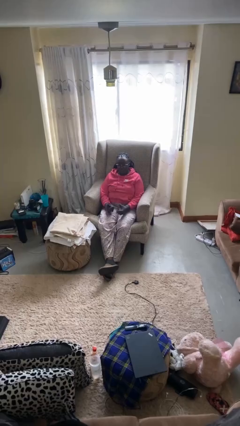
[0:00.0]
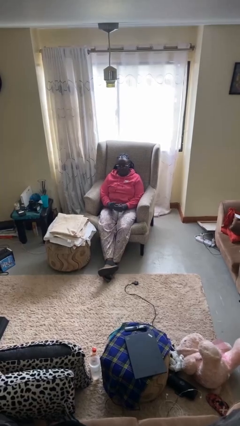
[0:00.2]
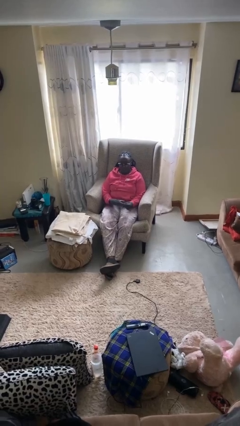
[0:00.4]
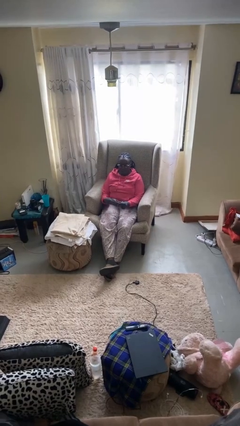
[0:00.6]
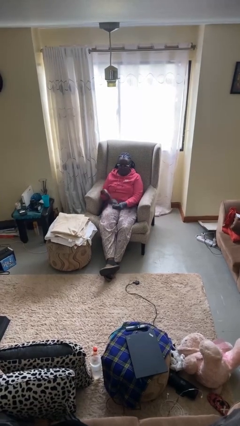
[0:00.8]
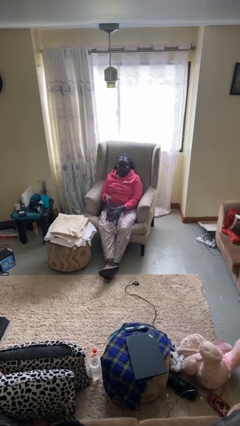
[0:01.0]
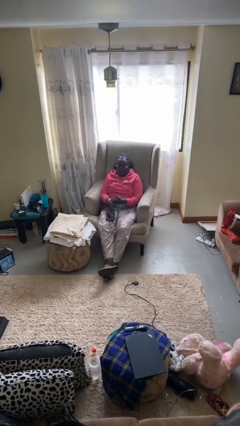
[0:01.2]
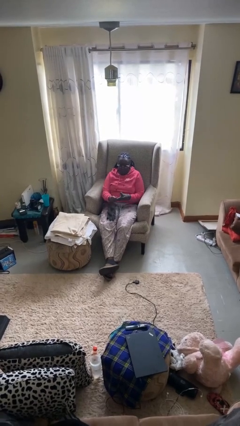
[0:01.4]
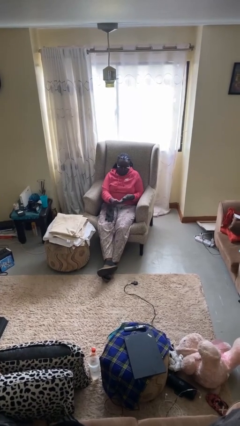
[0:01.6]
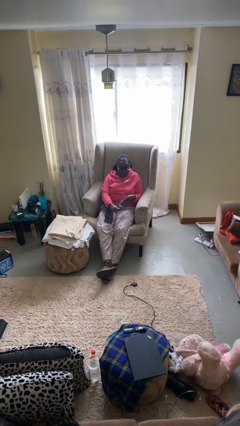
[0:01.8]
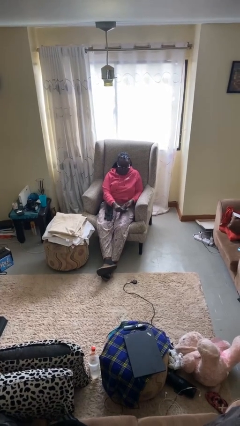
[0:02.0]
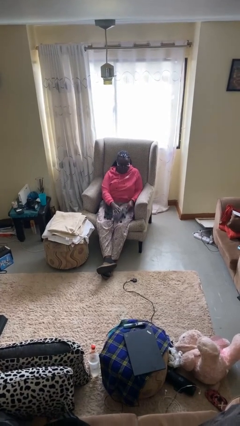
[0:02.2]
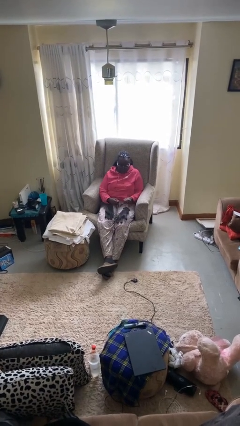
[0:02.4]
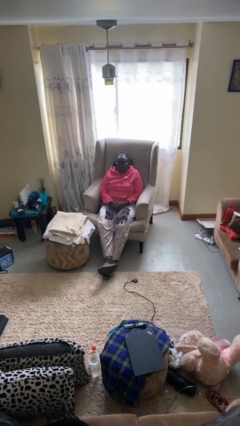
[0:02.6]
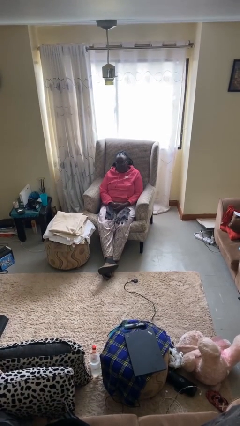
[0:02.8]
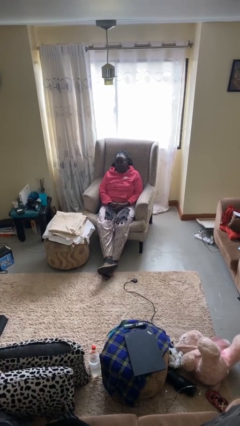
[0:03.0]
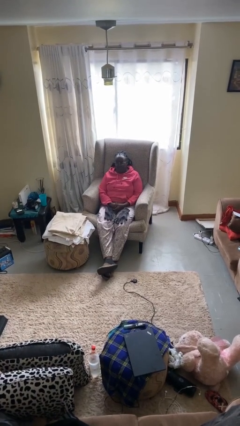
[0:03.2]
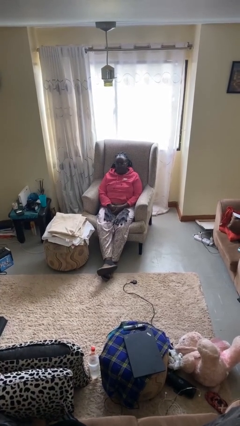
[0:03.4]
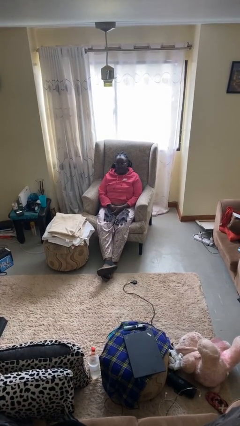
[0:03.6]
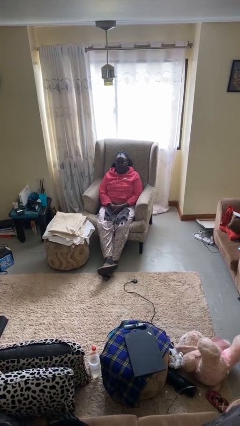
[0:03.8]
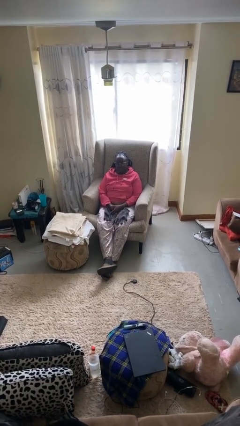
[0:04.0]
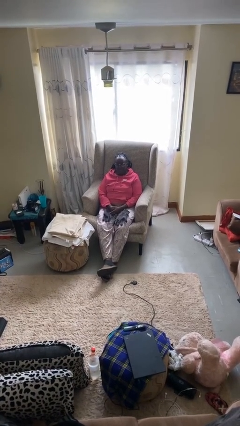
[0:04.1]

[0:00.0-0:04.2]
person takes off gloves

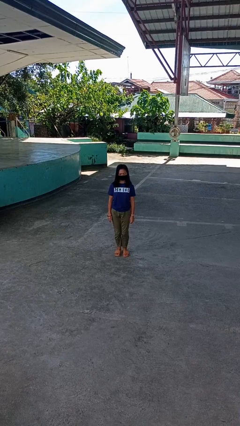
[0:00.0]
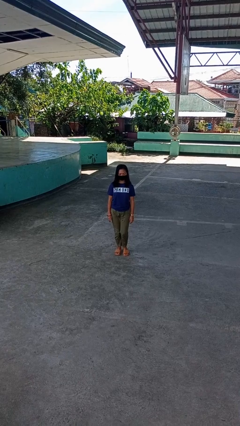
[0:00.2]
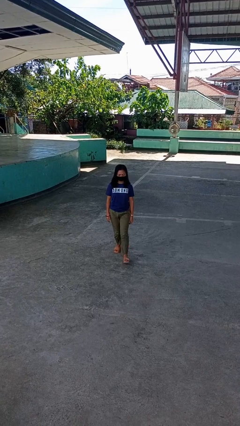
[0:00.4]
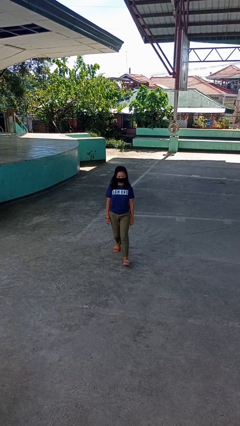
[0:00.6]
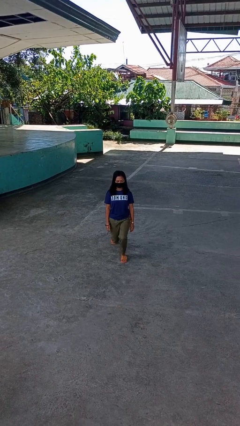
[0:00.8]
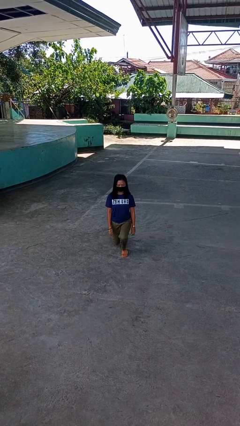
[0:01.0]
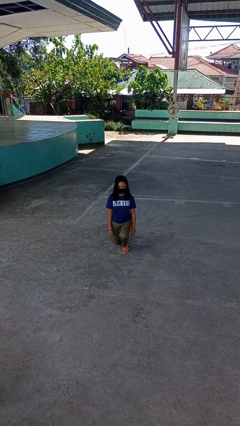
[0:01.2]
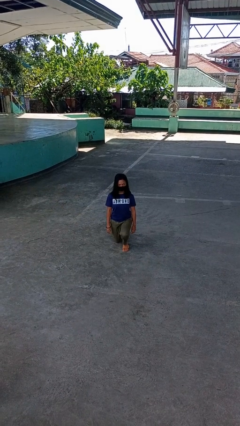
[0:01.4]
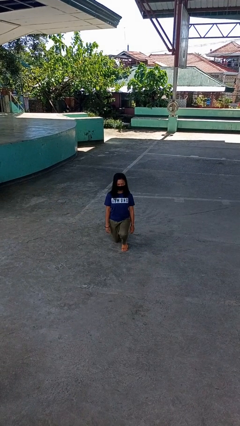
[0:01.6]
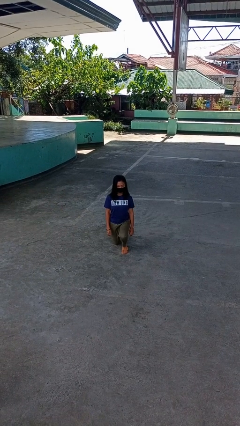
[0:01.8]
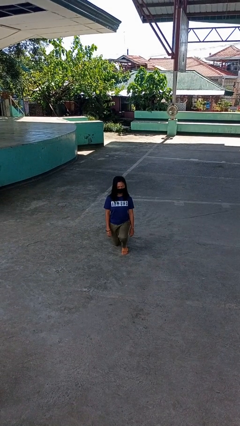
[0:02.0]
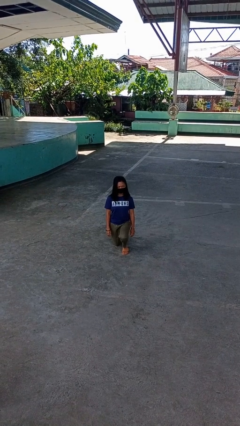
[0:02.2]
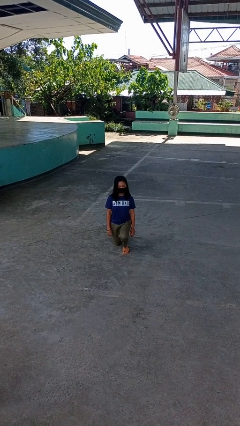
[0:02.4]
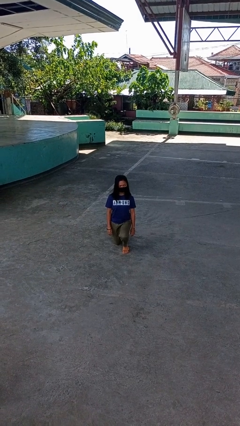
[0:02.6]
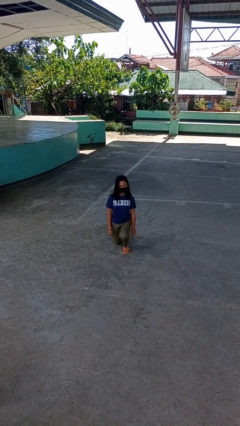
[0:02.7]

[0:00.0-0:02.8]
person kneels

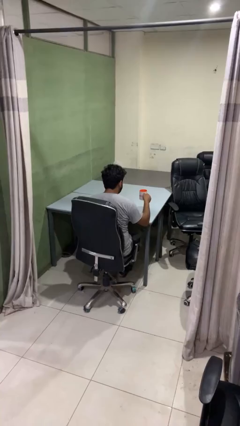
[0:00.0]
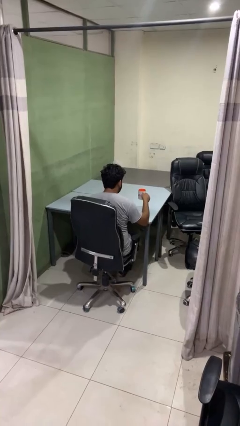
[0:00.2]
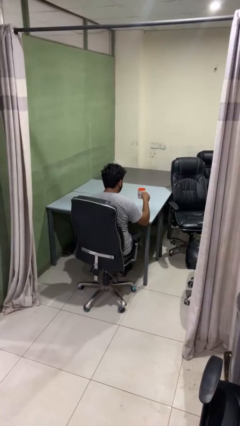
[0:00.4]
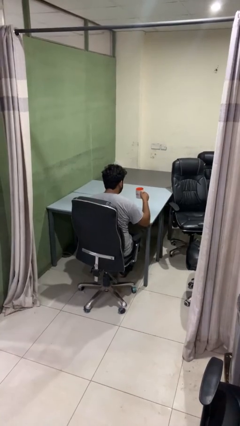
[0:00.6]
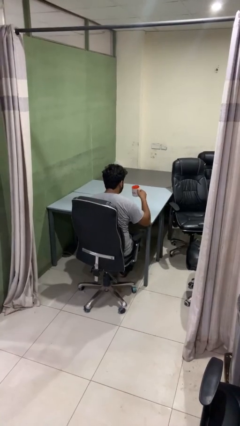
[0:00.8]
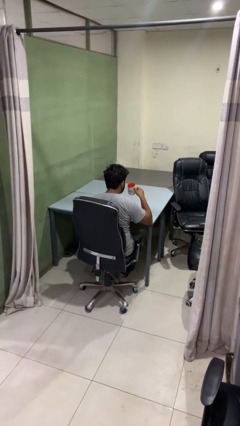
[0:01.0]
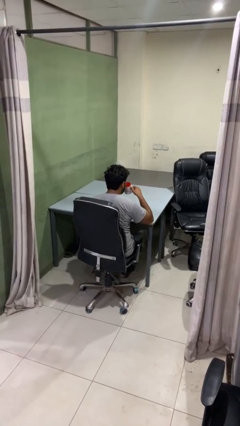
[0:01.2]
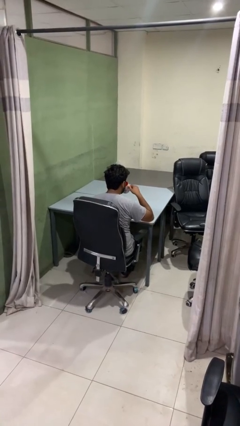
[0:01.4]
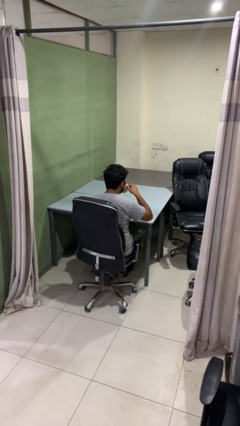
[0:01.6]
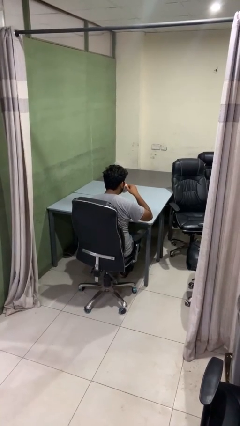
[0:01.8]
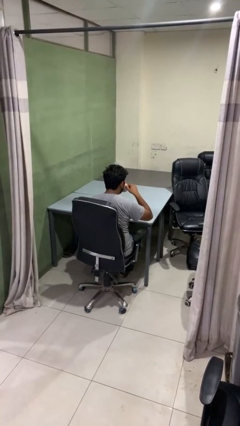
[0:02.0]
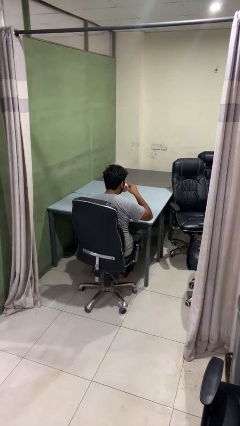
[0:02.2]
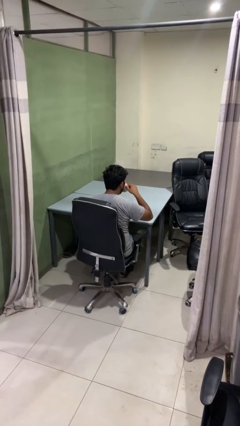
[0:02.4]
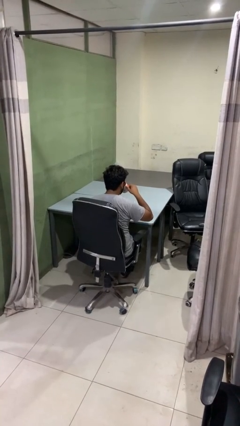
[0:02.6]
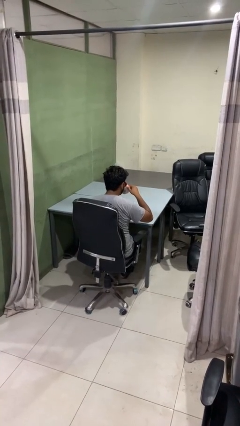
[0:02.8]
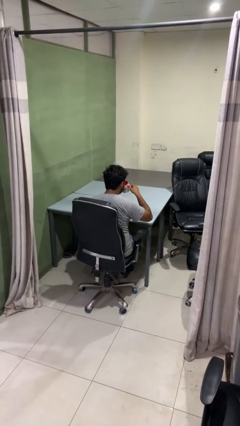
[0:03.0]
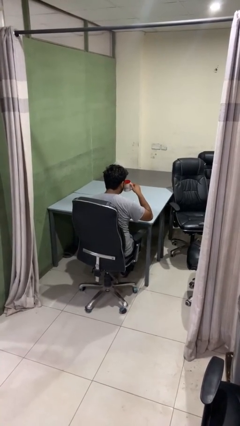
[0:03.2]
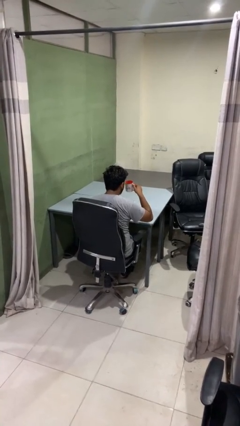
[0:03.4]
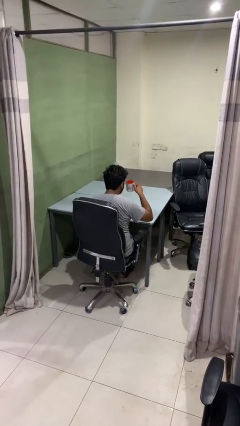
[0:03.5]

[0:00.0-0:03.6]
person drinks from mug

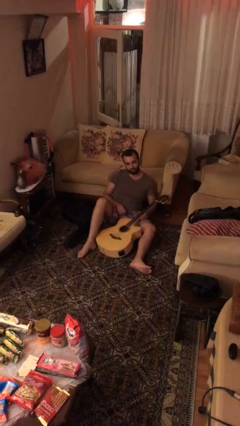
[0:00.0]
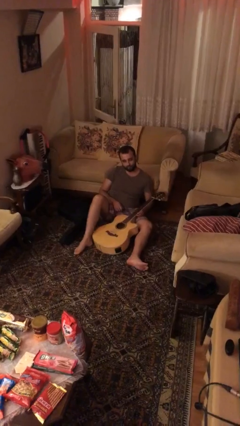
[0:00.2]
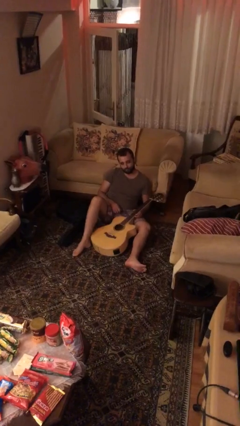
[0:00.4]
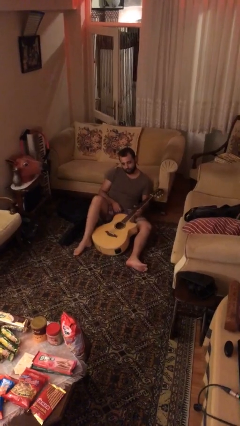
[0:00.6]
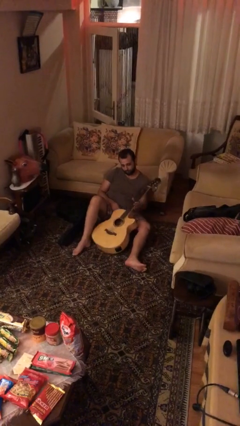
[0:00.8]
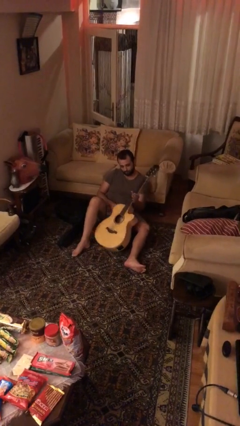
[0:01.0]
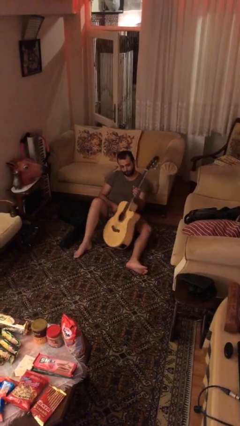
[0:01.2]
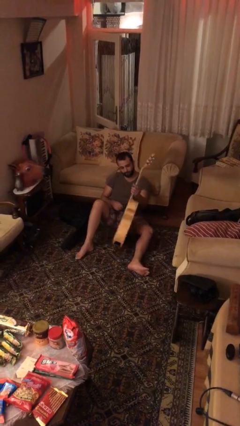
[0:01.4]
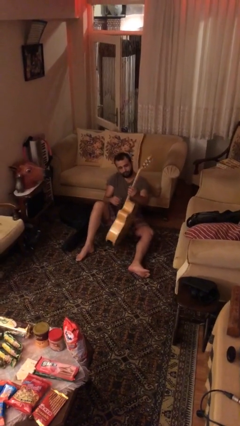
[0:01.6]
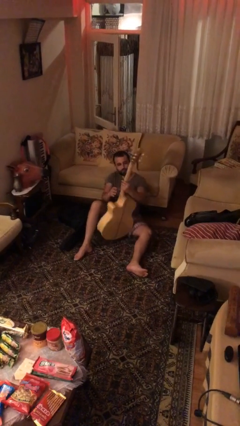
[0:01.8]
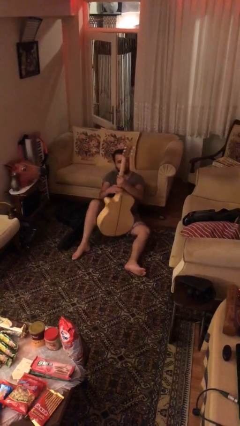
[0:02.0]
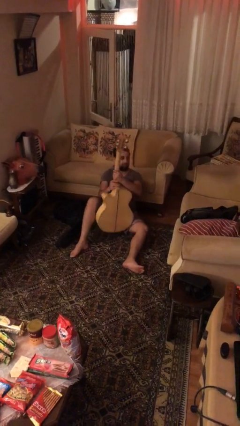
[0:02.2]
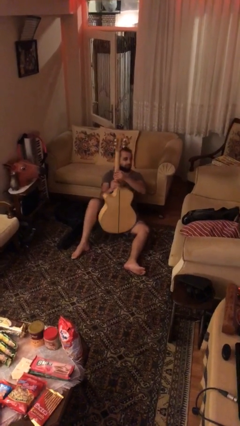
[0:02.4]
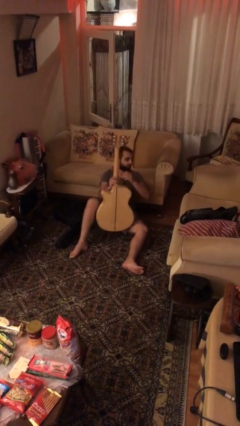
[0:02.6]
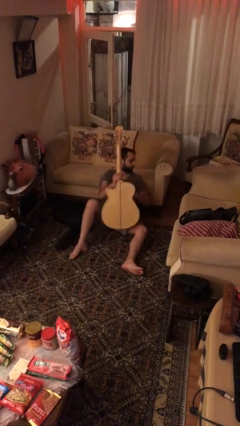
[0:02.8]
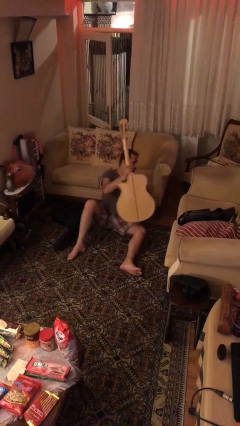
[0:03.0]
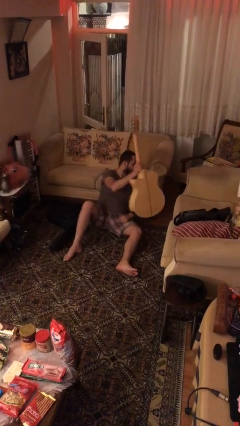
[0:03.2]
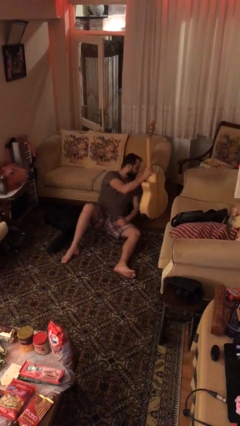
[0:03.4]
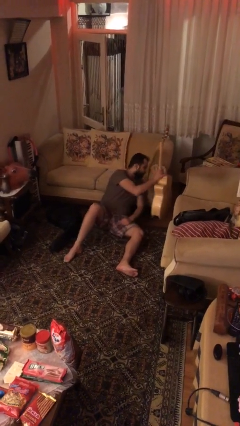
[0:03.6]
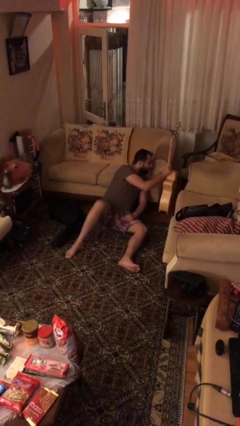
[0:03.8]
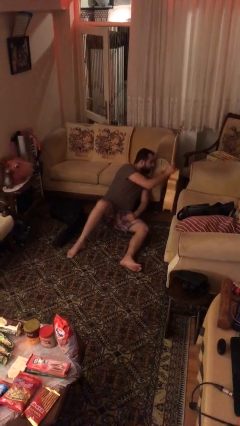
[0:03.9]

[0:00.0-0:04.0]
person picks up object from floor

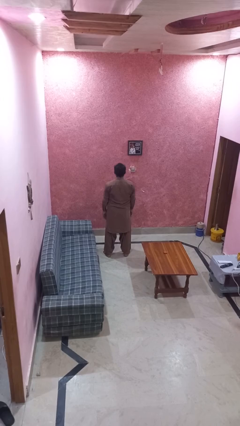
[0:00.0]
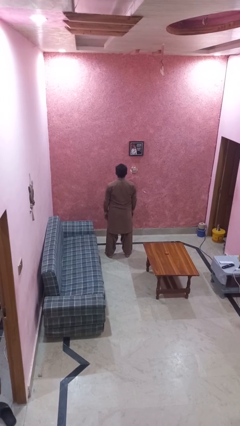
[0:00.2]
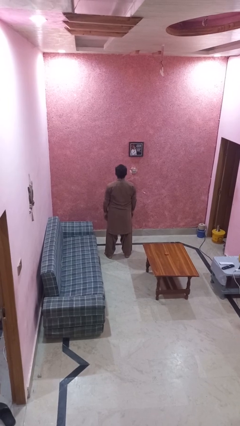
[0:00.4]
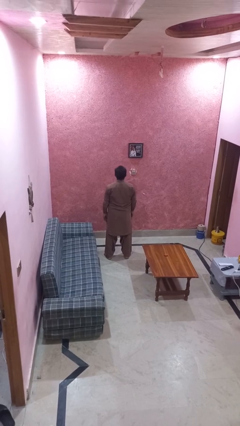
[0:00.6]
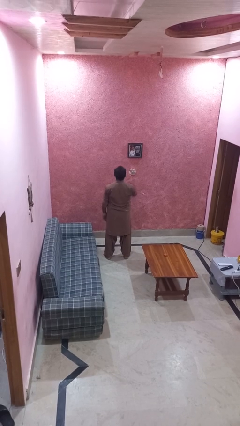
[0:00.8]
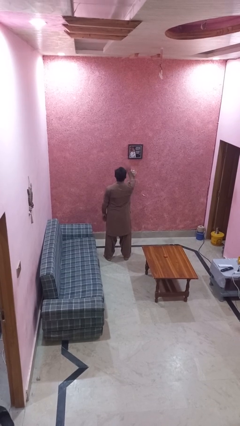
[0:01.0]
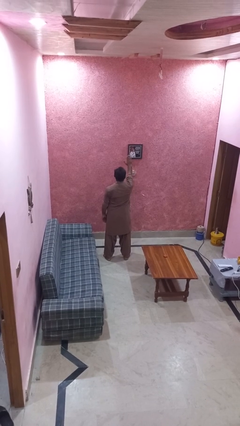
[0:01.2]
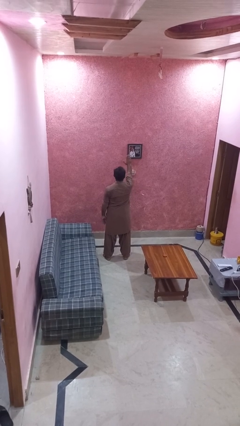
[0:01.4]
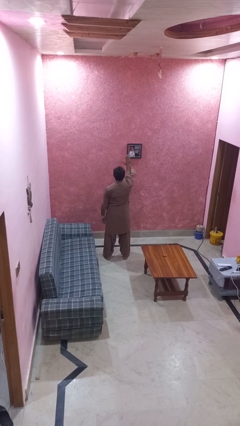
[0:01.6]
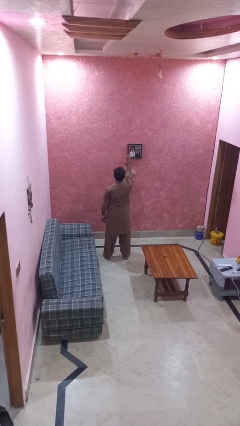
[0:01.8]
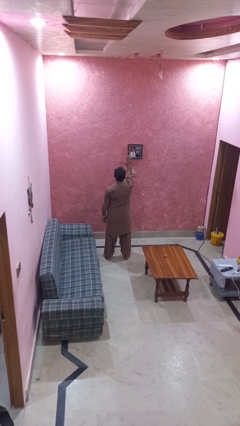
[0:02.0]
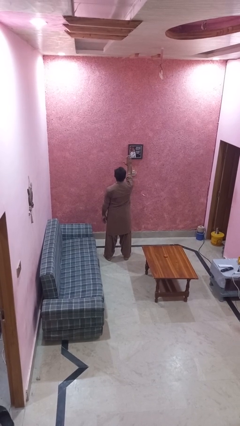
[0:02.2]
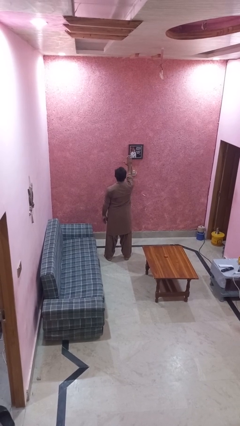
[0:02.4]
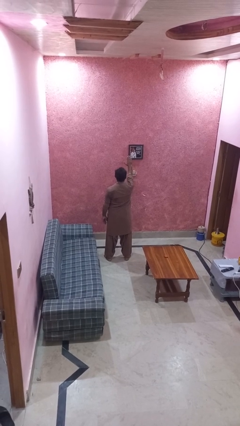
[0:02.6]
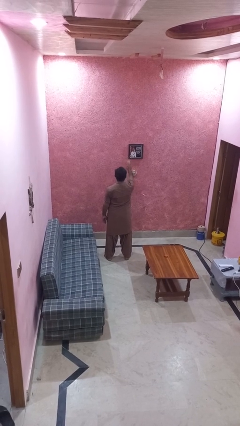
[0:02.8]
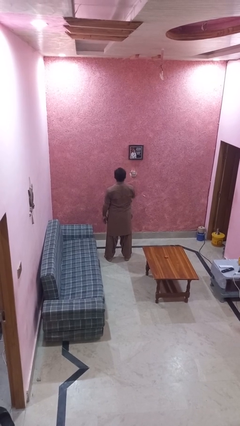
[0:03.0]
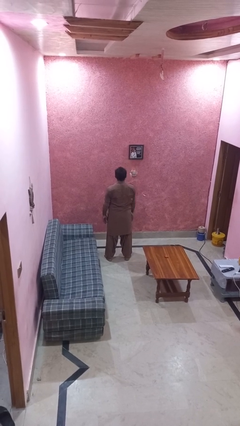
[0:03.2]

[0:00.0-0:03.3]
person gestures stop
